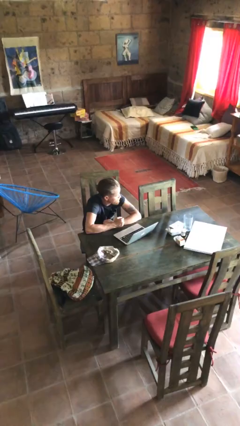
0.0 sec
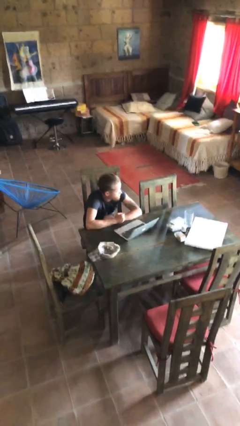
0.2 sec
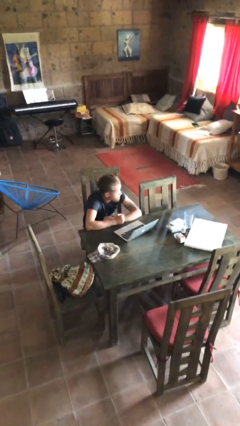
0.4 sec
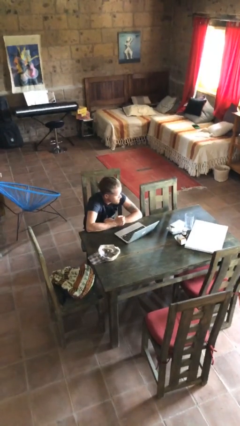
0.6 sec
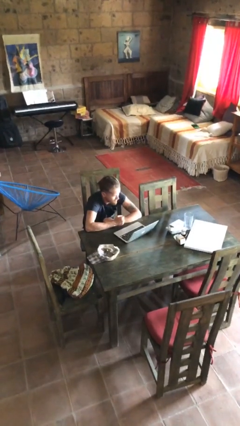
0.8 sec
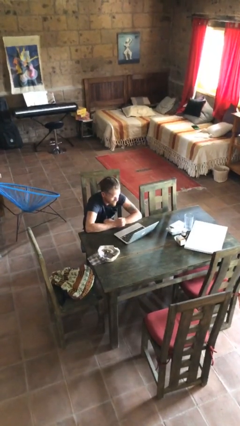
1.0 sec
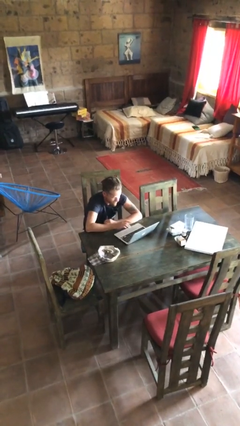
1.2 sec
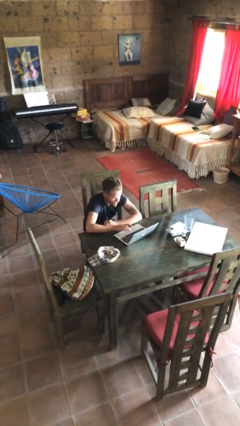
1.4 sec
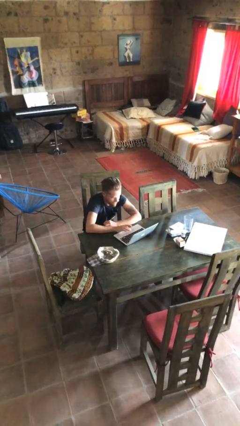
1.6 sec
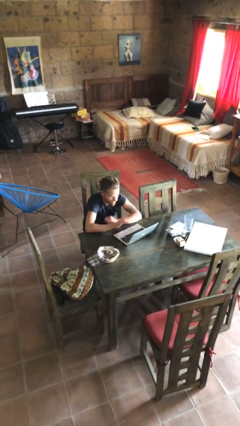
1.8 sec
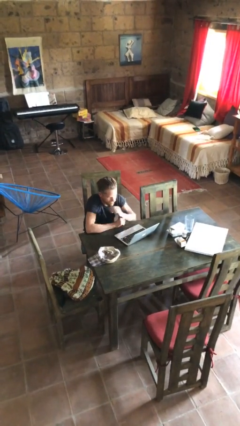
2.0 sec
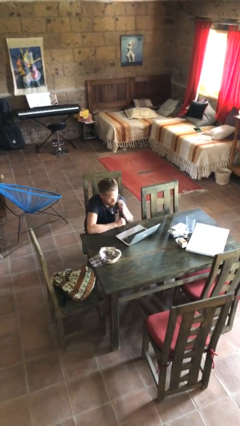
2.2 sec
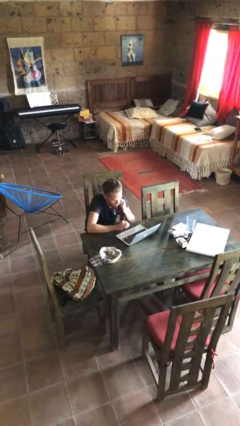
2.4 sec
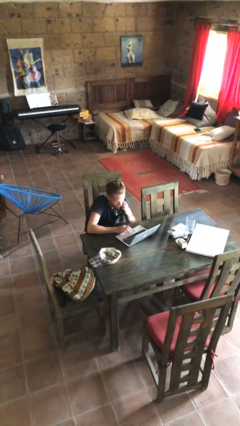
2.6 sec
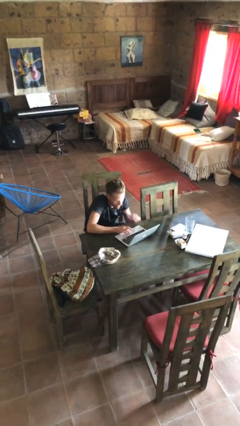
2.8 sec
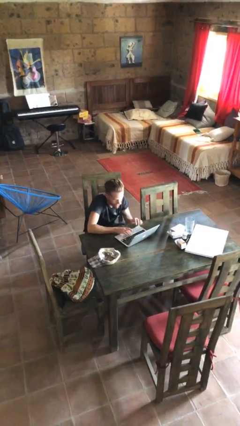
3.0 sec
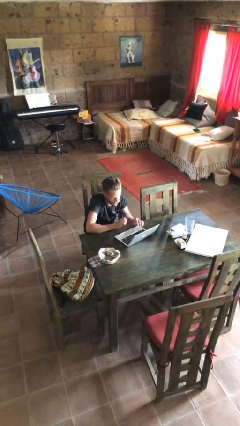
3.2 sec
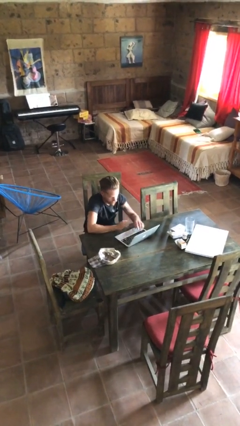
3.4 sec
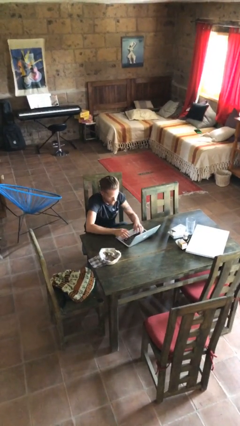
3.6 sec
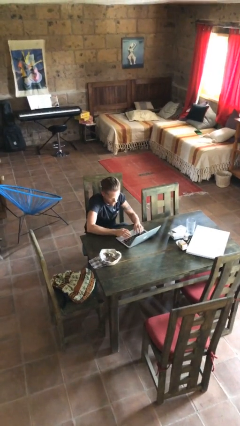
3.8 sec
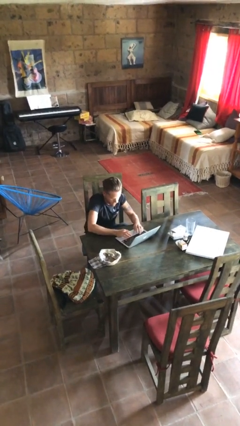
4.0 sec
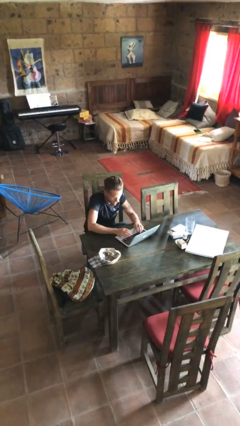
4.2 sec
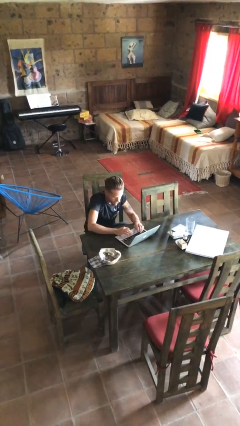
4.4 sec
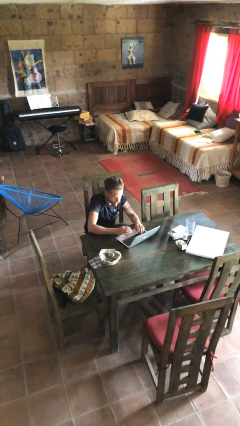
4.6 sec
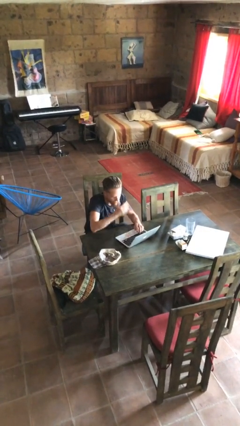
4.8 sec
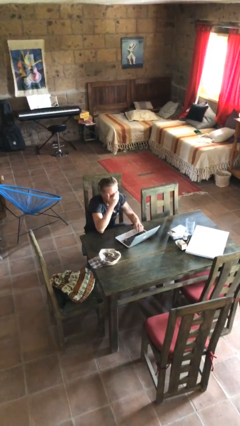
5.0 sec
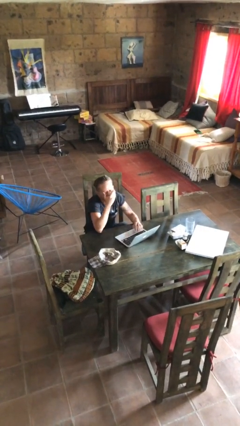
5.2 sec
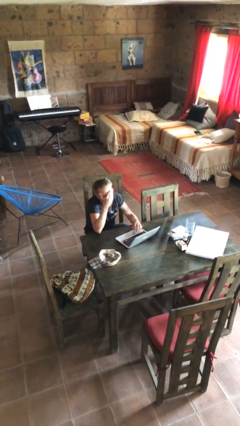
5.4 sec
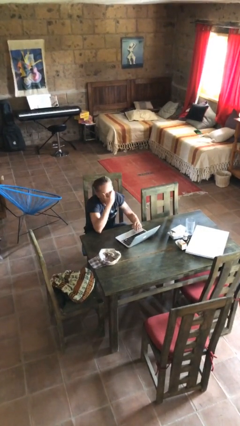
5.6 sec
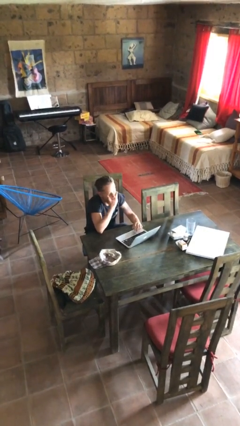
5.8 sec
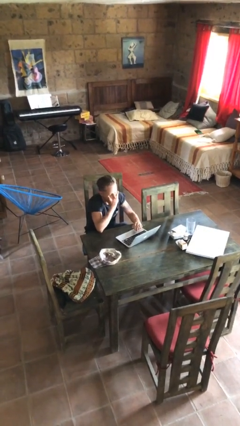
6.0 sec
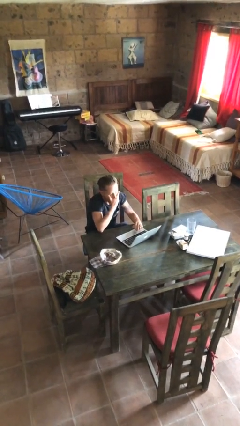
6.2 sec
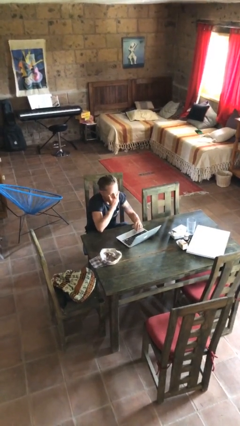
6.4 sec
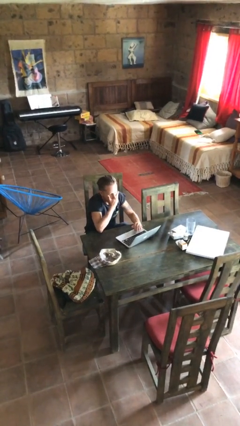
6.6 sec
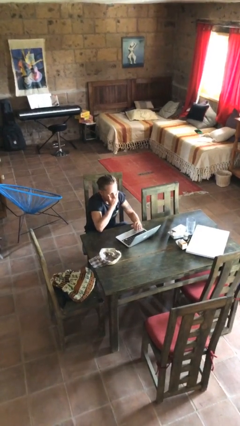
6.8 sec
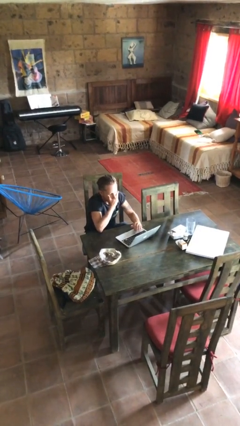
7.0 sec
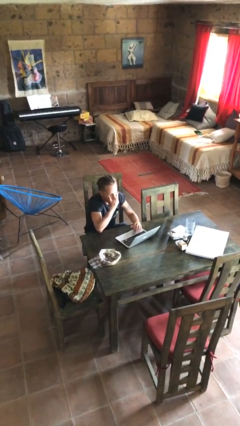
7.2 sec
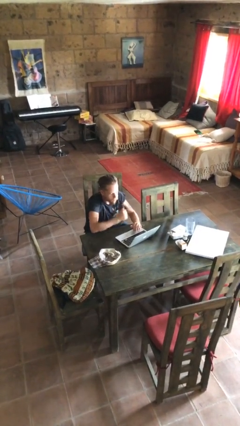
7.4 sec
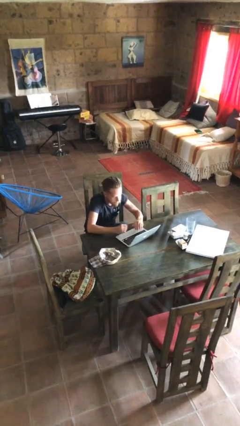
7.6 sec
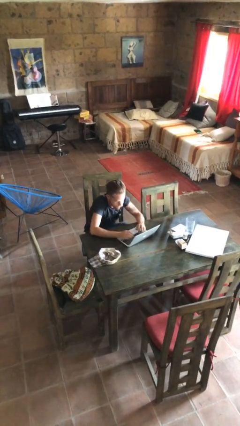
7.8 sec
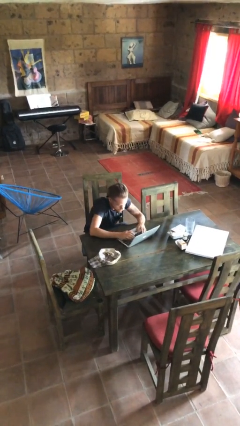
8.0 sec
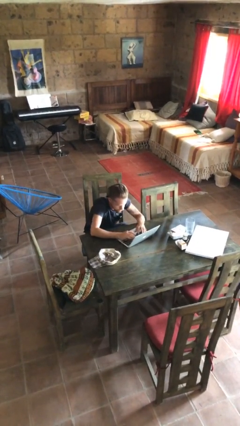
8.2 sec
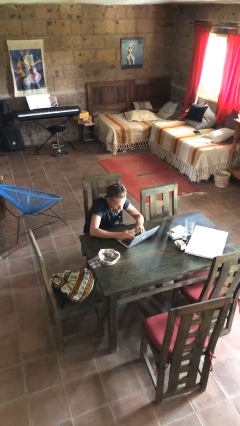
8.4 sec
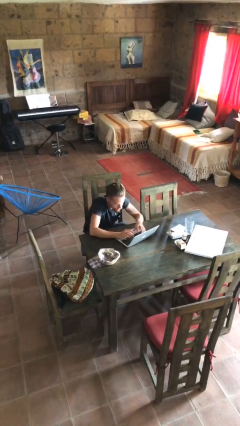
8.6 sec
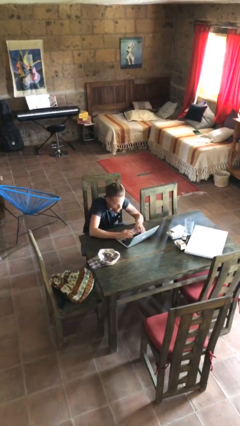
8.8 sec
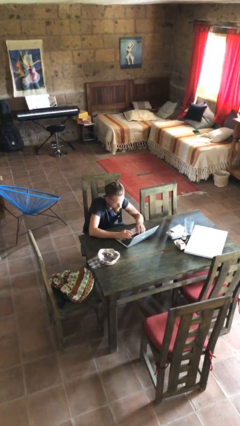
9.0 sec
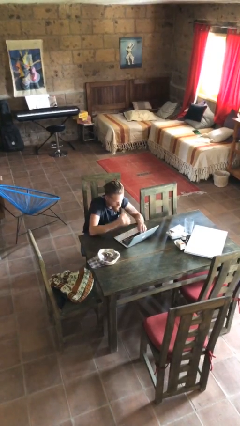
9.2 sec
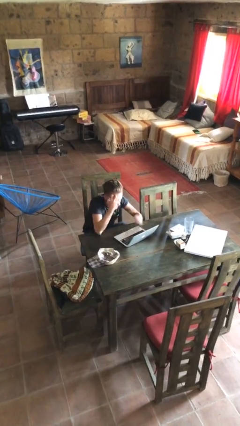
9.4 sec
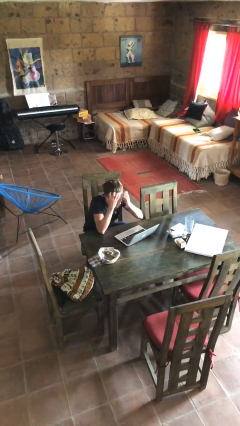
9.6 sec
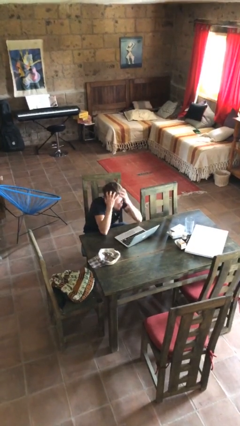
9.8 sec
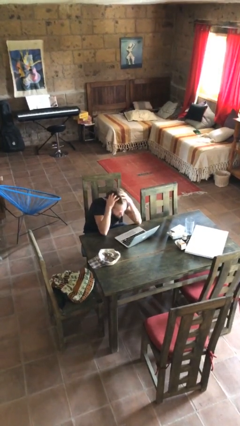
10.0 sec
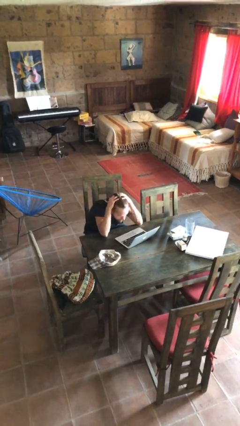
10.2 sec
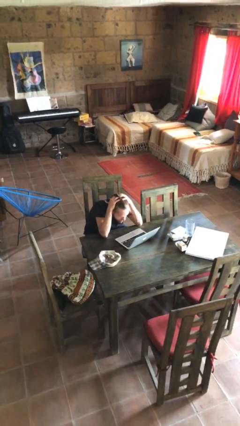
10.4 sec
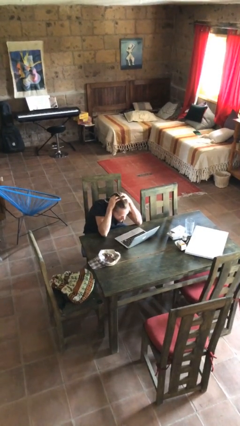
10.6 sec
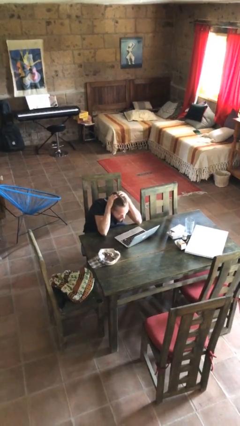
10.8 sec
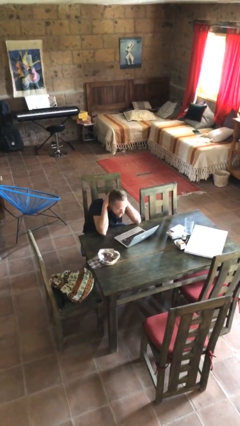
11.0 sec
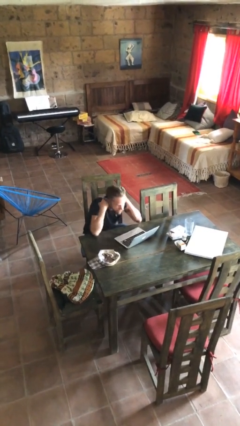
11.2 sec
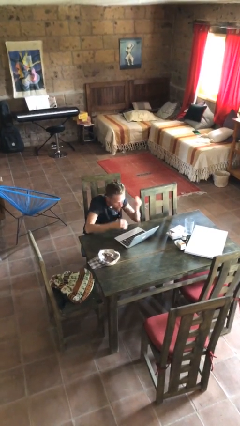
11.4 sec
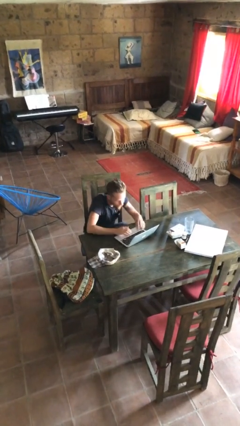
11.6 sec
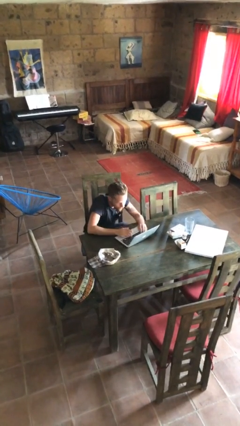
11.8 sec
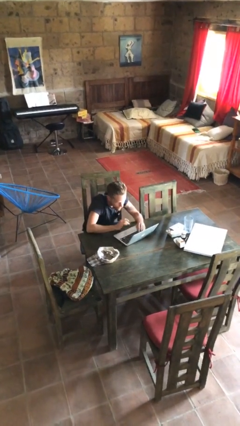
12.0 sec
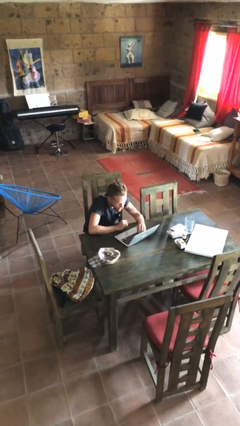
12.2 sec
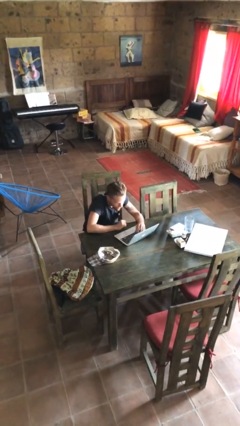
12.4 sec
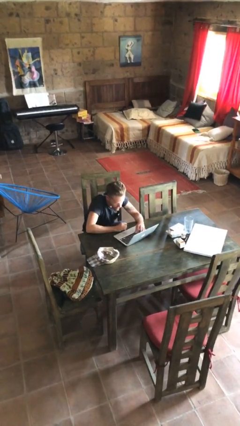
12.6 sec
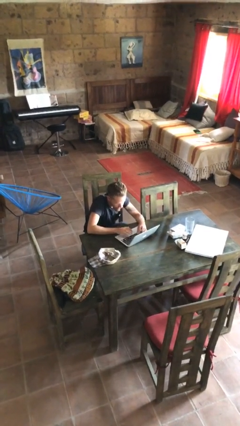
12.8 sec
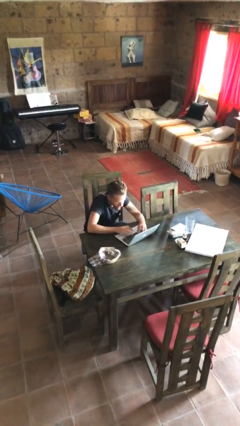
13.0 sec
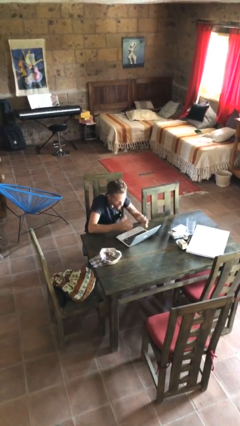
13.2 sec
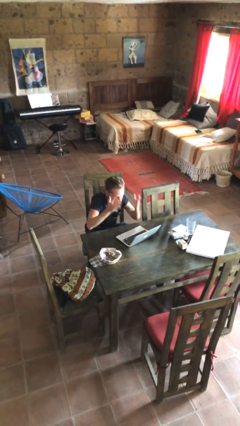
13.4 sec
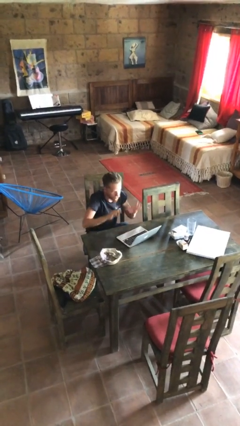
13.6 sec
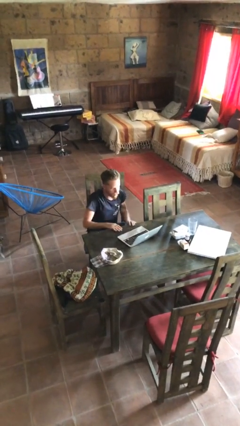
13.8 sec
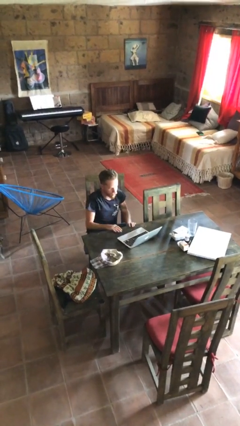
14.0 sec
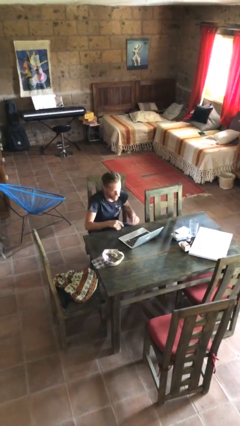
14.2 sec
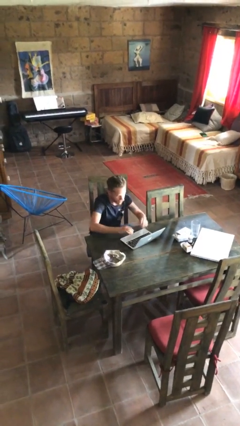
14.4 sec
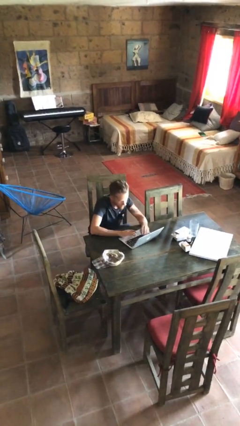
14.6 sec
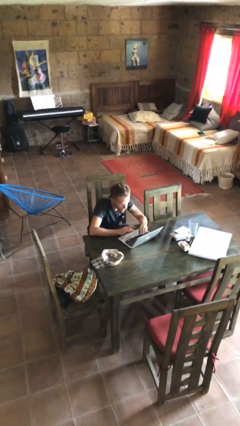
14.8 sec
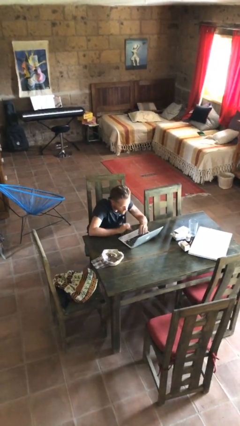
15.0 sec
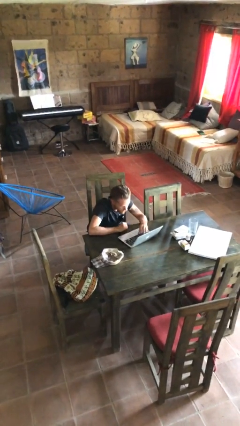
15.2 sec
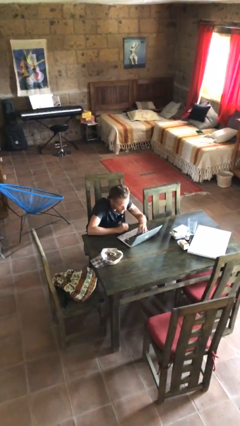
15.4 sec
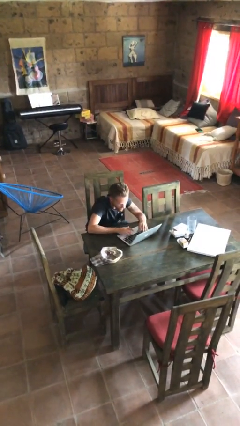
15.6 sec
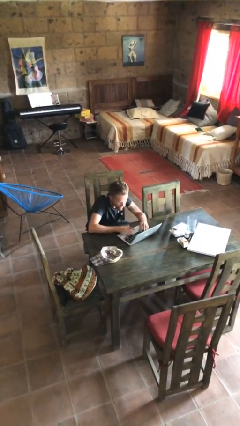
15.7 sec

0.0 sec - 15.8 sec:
person interacts with laptop

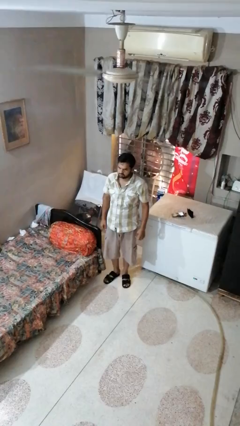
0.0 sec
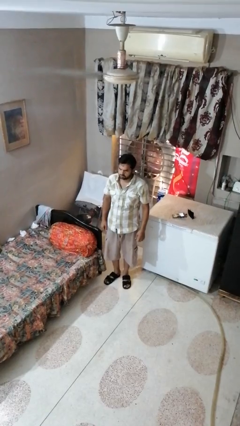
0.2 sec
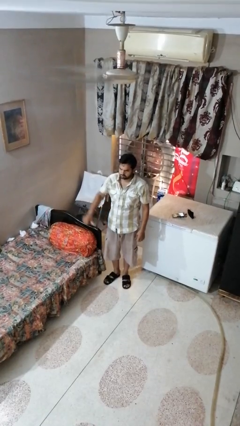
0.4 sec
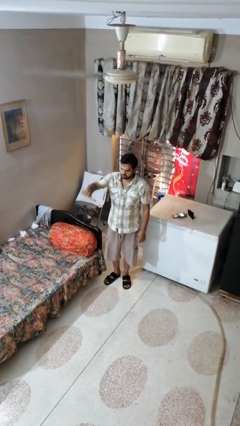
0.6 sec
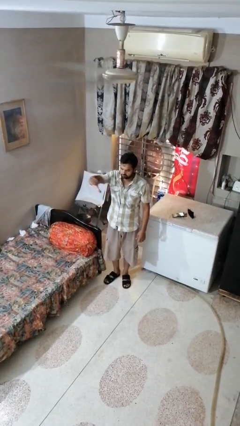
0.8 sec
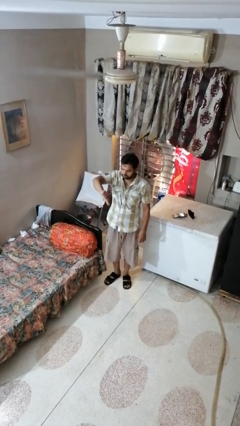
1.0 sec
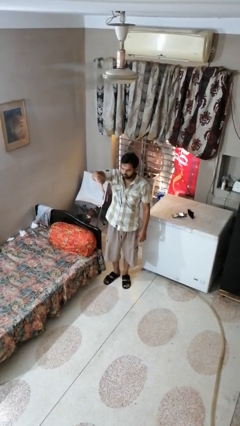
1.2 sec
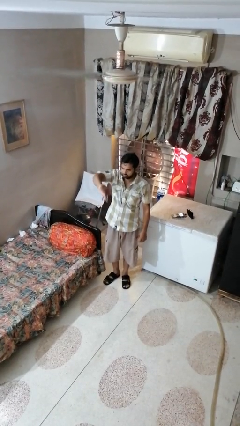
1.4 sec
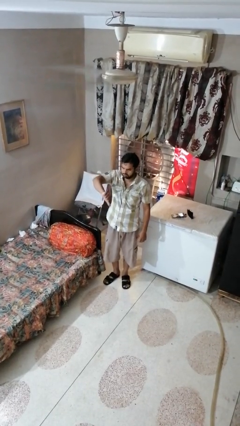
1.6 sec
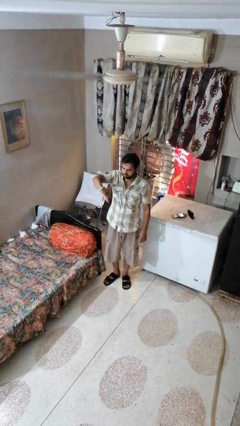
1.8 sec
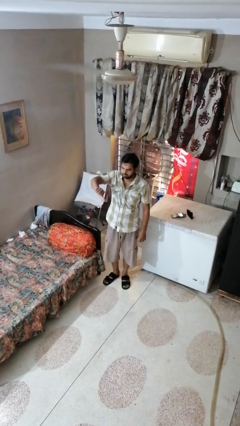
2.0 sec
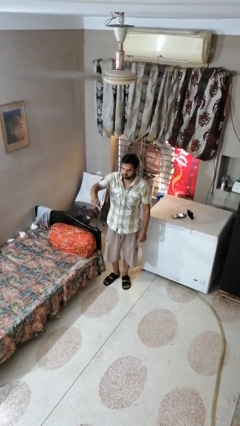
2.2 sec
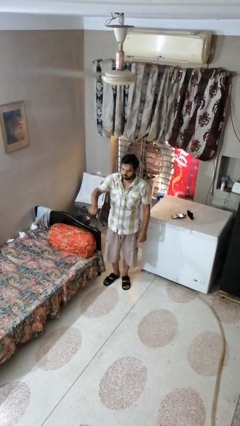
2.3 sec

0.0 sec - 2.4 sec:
person gestures thumbs down
